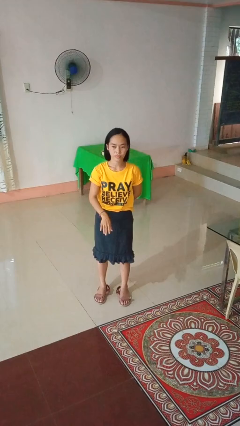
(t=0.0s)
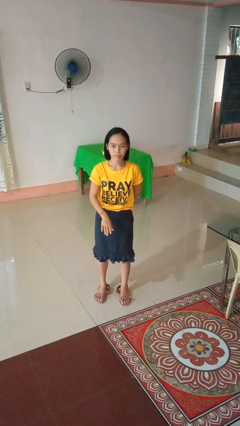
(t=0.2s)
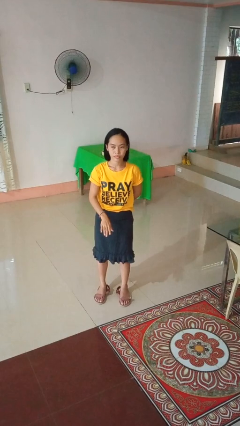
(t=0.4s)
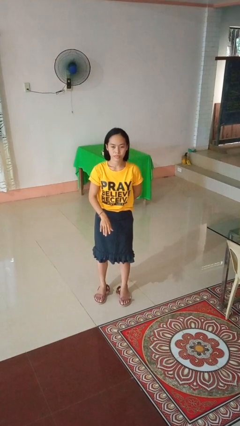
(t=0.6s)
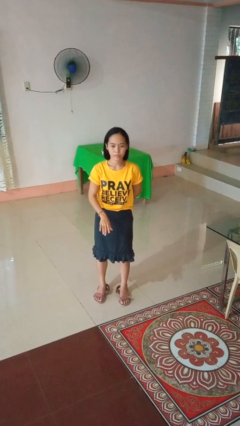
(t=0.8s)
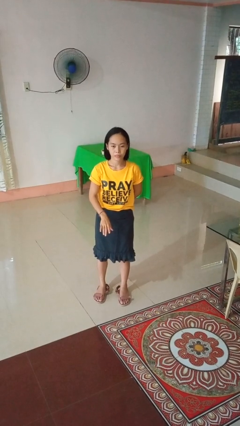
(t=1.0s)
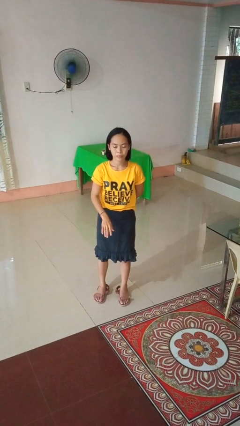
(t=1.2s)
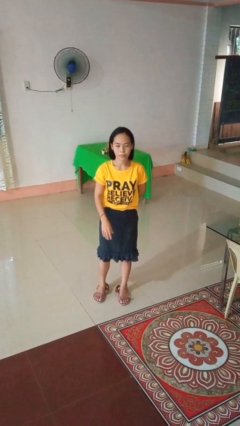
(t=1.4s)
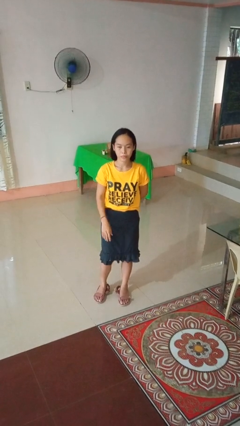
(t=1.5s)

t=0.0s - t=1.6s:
person gestures swipe down

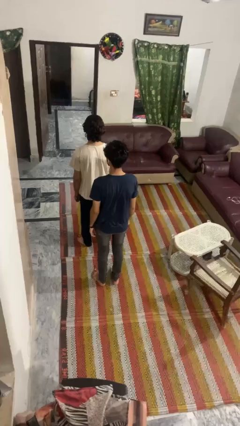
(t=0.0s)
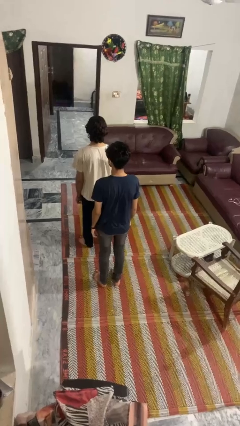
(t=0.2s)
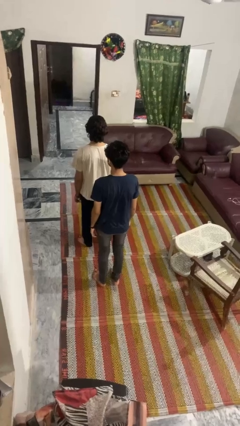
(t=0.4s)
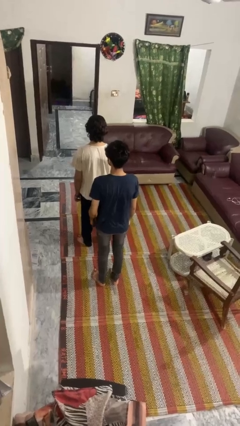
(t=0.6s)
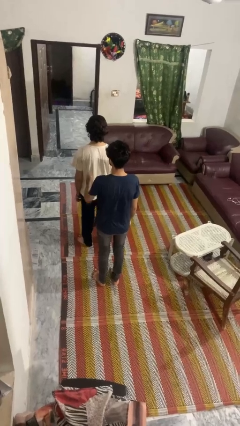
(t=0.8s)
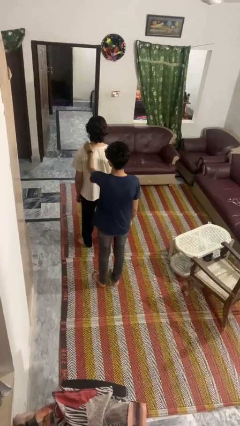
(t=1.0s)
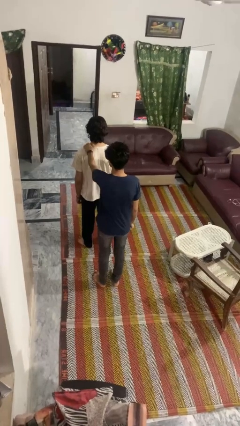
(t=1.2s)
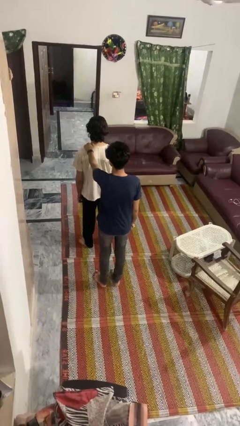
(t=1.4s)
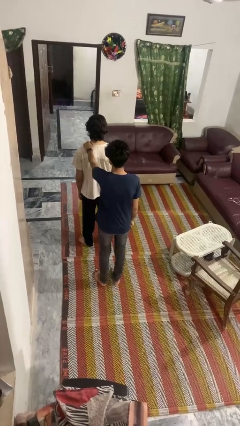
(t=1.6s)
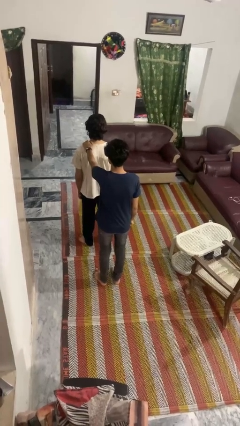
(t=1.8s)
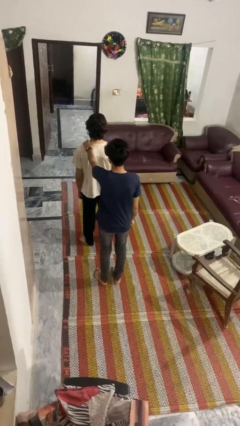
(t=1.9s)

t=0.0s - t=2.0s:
person grabs person by shoulder

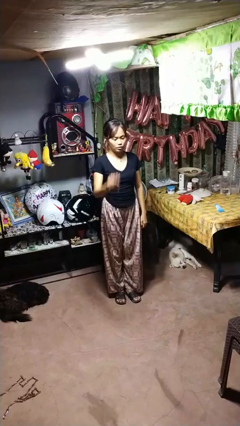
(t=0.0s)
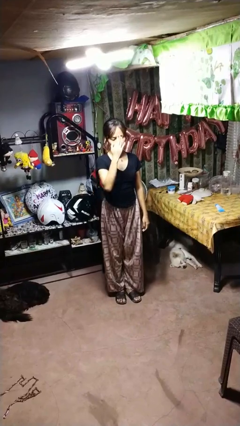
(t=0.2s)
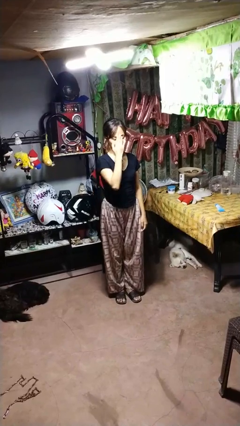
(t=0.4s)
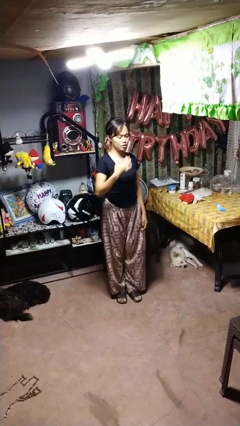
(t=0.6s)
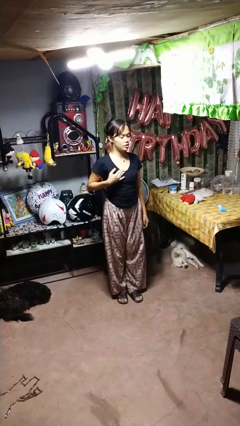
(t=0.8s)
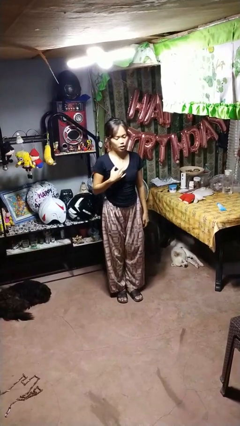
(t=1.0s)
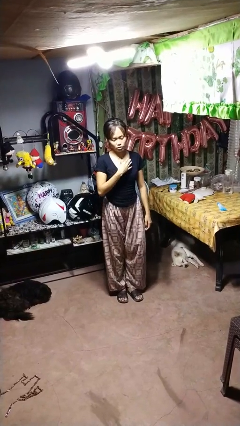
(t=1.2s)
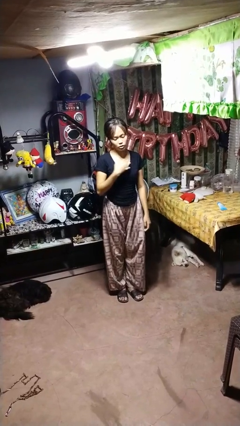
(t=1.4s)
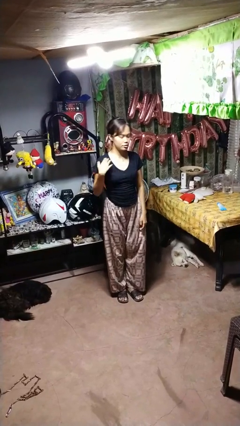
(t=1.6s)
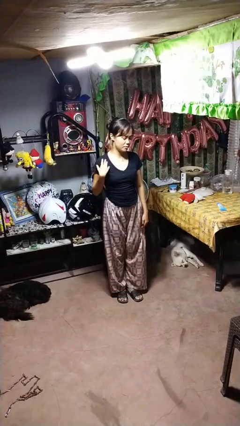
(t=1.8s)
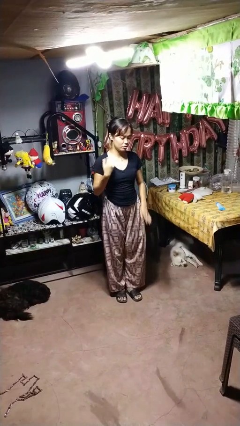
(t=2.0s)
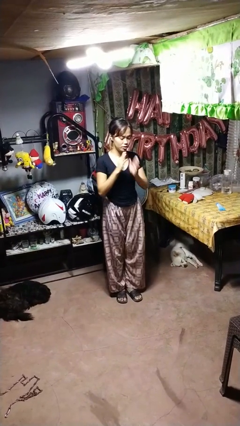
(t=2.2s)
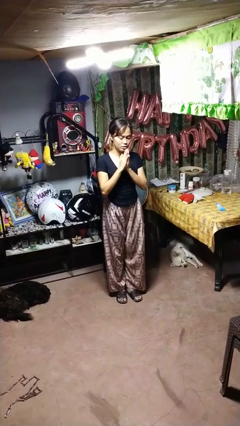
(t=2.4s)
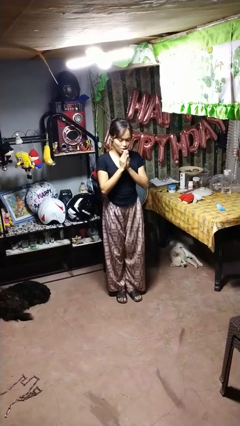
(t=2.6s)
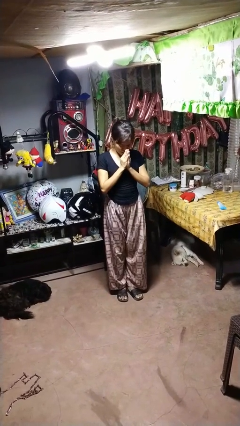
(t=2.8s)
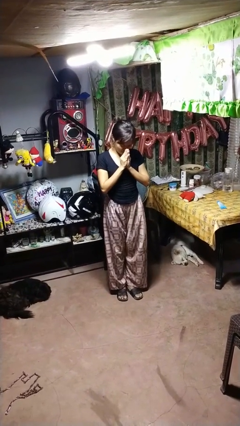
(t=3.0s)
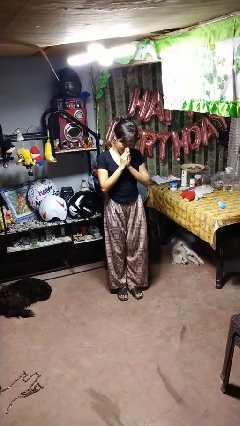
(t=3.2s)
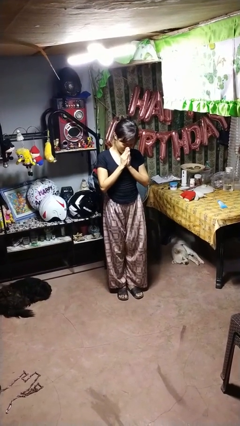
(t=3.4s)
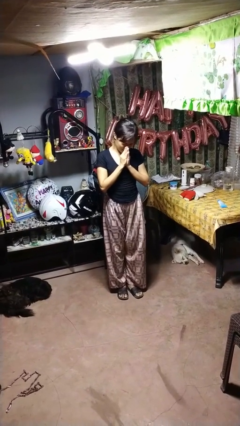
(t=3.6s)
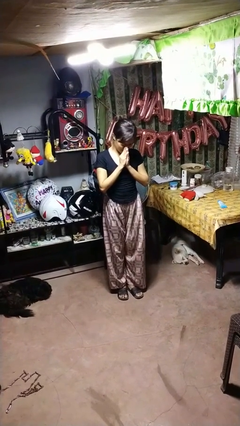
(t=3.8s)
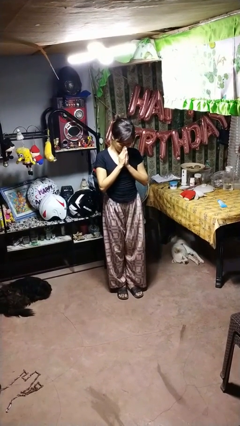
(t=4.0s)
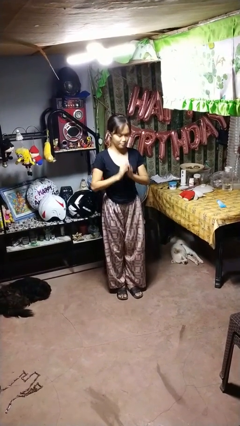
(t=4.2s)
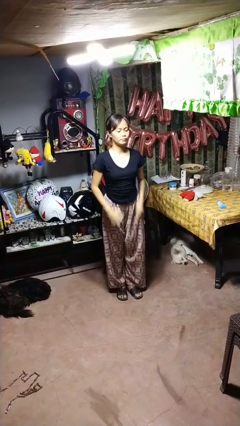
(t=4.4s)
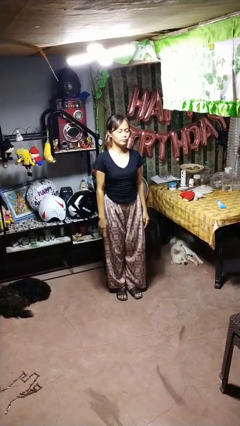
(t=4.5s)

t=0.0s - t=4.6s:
person prays

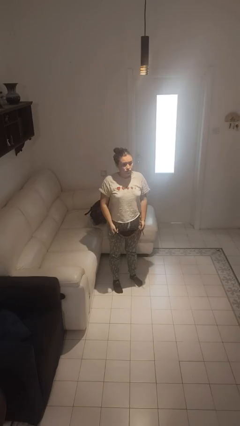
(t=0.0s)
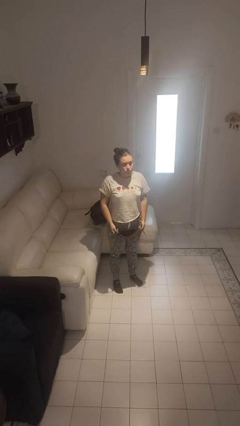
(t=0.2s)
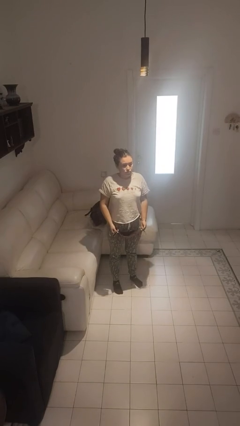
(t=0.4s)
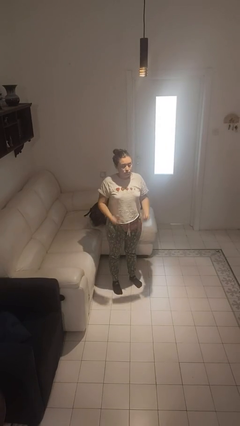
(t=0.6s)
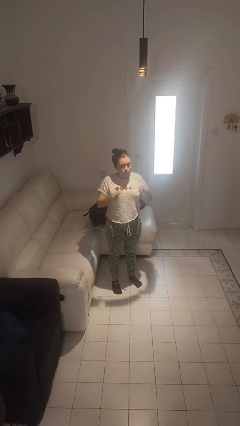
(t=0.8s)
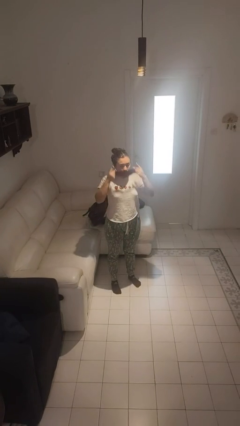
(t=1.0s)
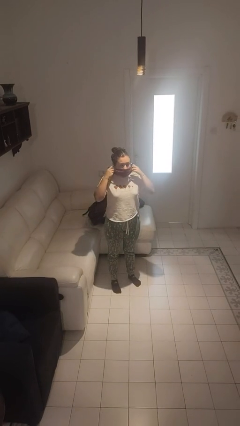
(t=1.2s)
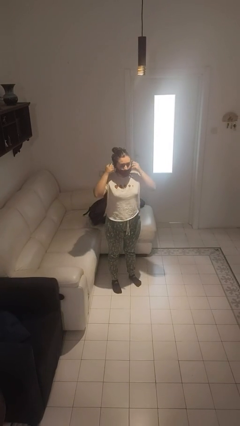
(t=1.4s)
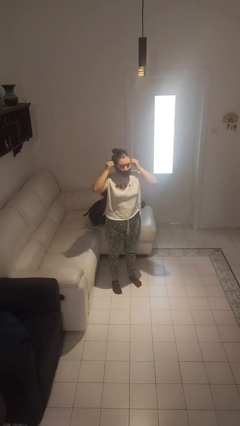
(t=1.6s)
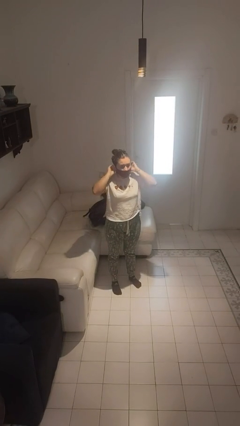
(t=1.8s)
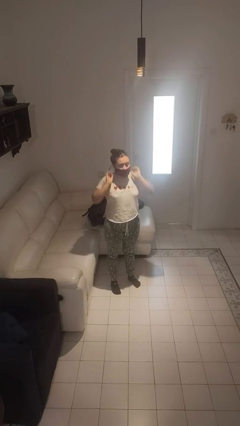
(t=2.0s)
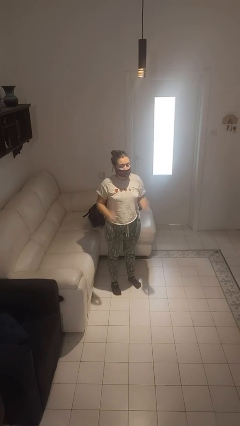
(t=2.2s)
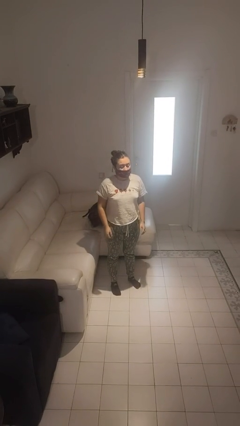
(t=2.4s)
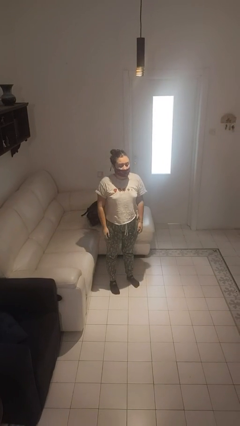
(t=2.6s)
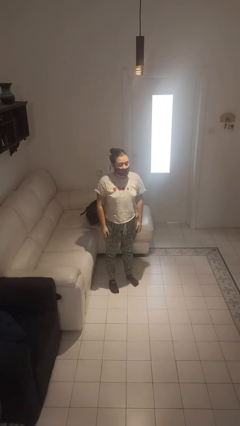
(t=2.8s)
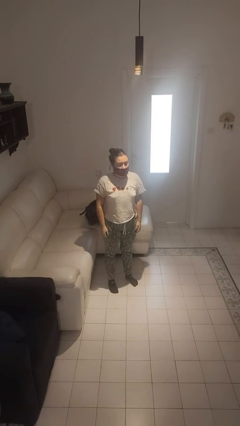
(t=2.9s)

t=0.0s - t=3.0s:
person puts on facemask

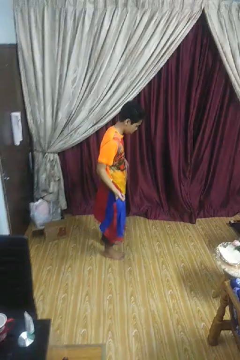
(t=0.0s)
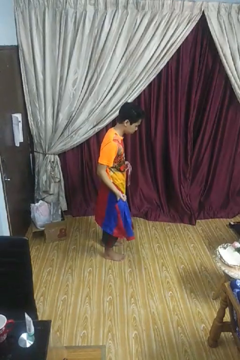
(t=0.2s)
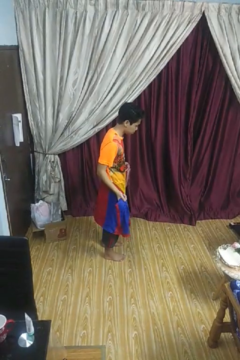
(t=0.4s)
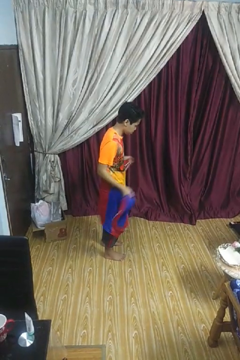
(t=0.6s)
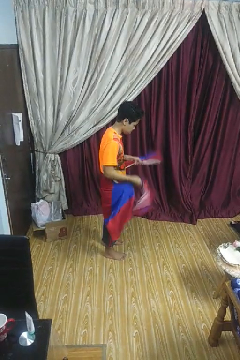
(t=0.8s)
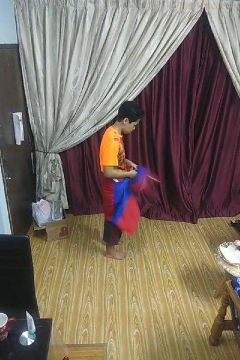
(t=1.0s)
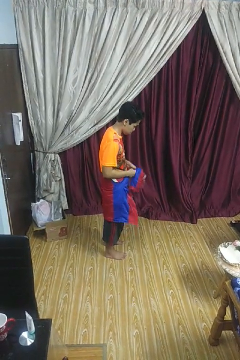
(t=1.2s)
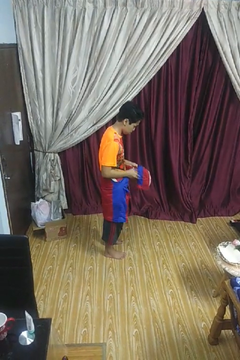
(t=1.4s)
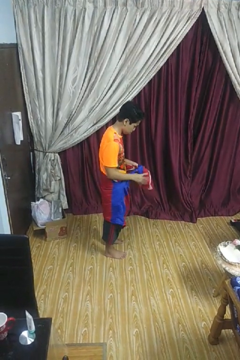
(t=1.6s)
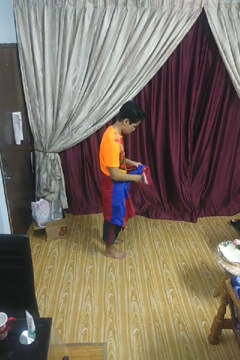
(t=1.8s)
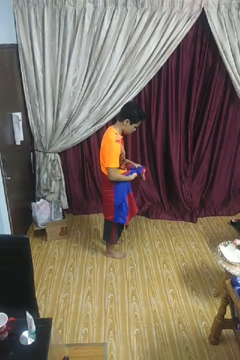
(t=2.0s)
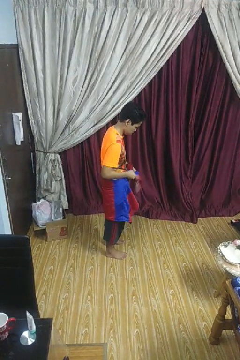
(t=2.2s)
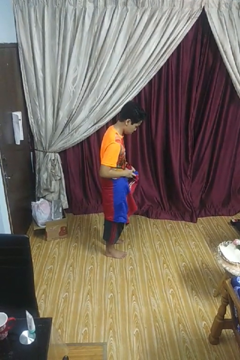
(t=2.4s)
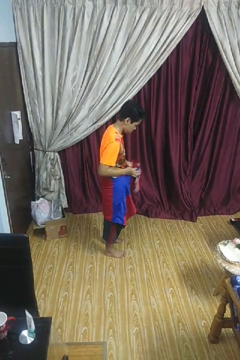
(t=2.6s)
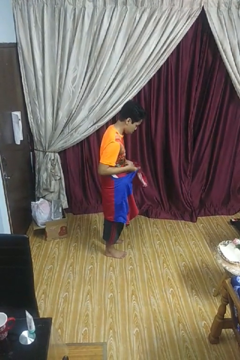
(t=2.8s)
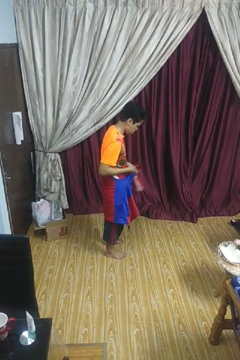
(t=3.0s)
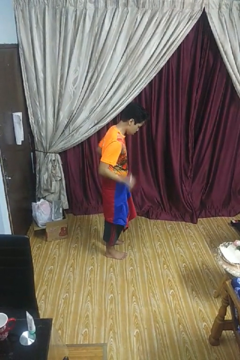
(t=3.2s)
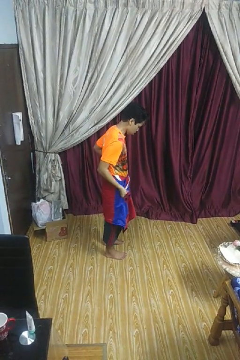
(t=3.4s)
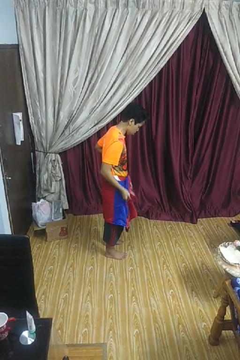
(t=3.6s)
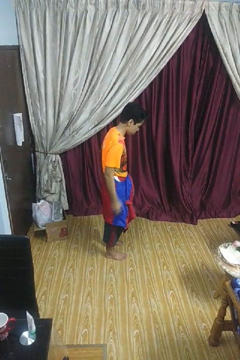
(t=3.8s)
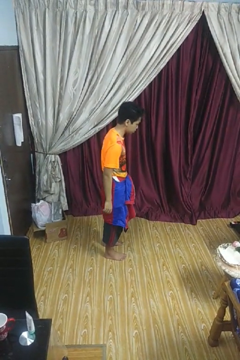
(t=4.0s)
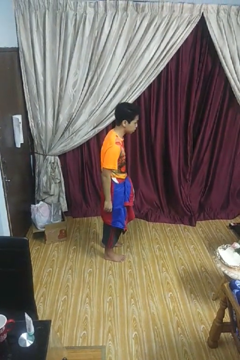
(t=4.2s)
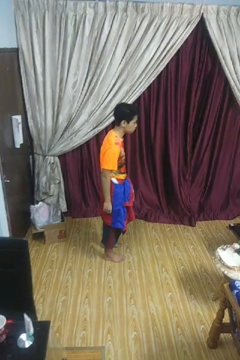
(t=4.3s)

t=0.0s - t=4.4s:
person ties jacket around waist

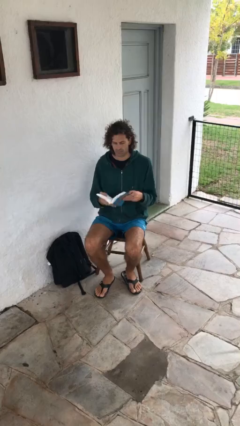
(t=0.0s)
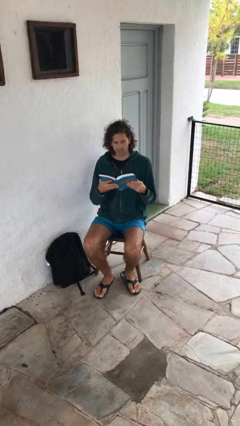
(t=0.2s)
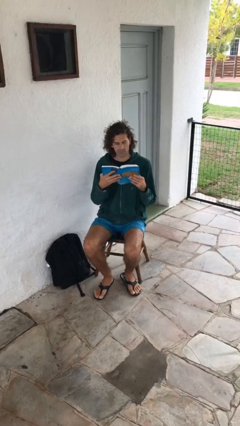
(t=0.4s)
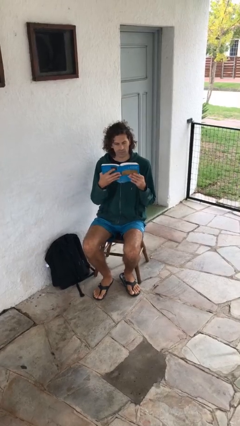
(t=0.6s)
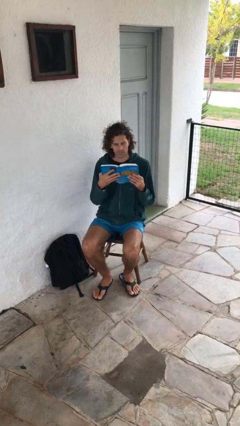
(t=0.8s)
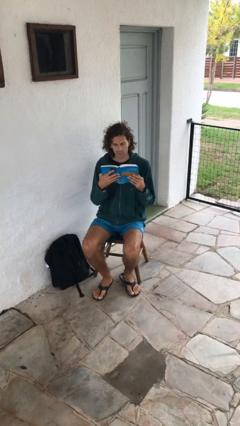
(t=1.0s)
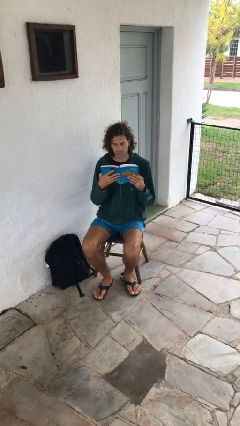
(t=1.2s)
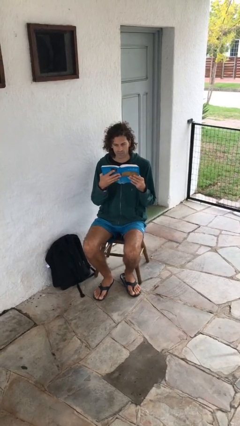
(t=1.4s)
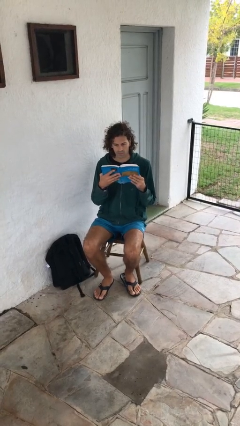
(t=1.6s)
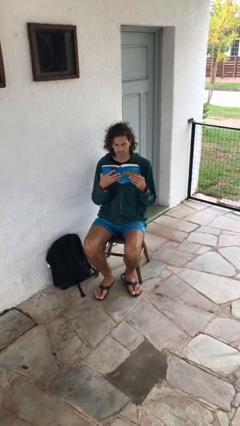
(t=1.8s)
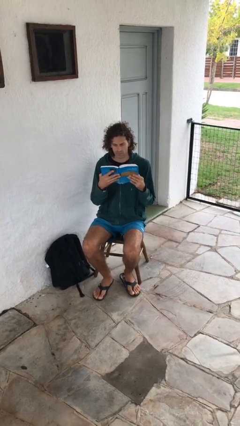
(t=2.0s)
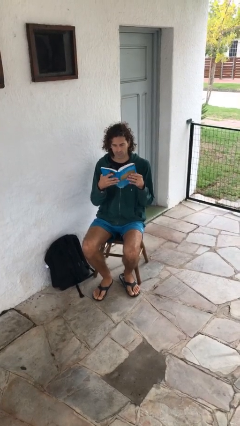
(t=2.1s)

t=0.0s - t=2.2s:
person reads document
